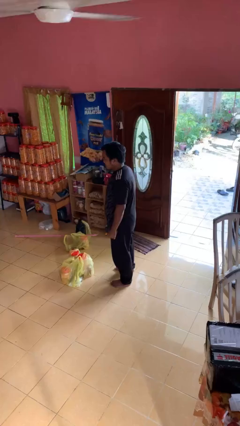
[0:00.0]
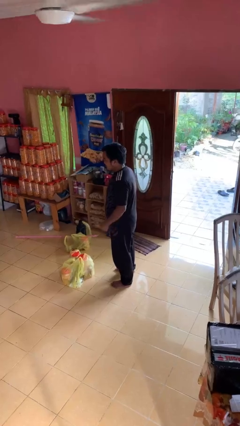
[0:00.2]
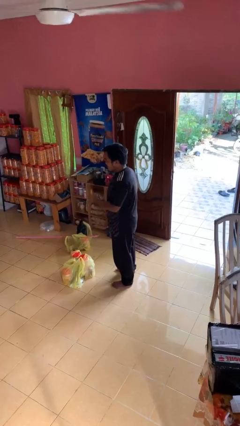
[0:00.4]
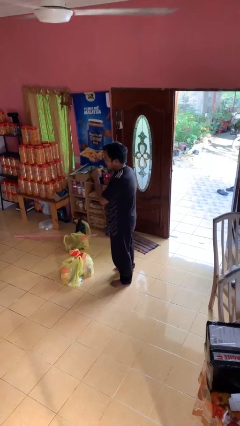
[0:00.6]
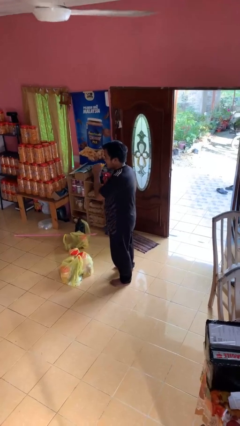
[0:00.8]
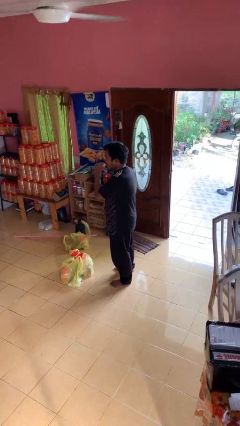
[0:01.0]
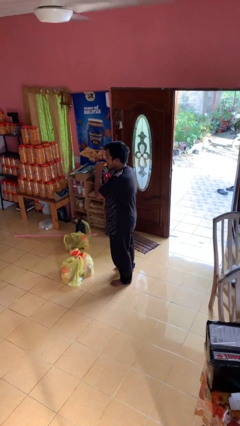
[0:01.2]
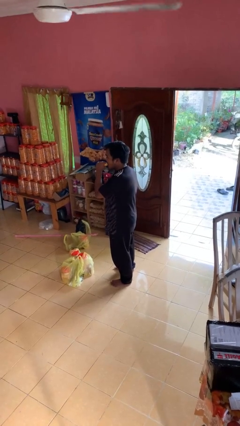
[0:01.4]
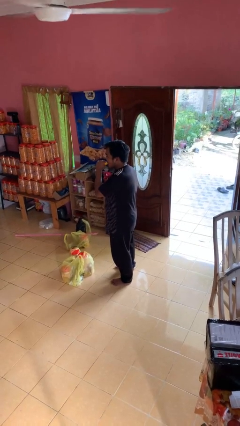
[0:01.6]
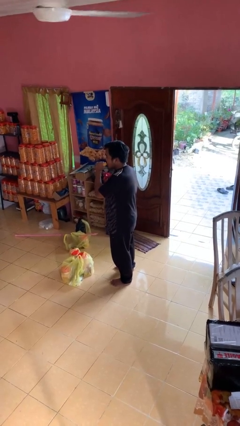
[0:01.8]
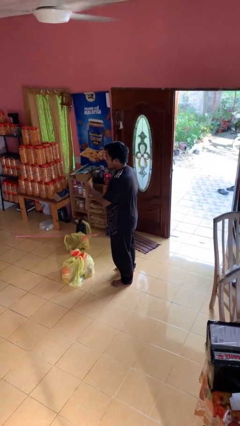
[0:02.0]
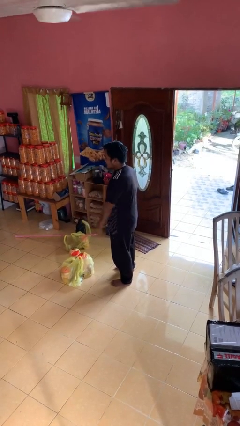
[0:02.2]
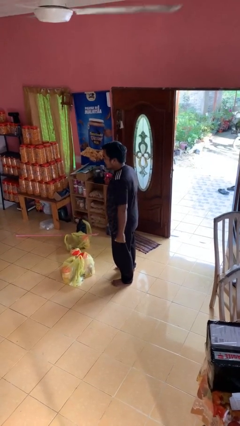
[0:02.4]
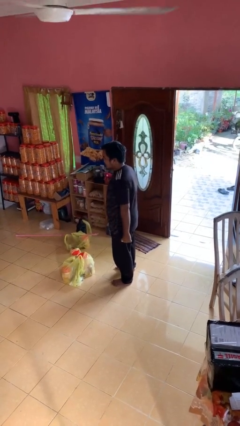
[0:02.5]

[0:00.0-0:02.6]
person eats banana

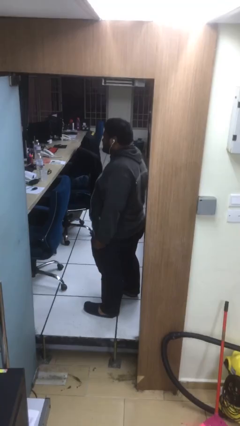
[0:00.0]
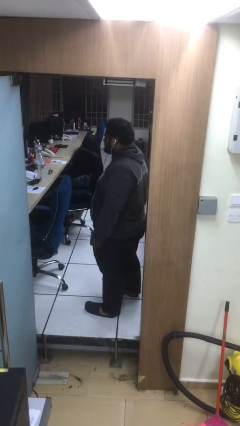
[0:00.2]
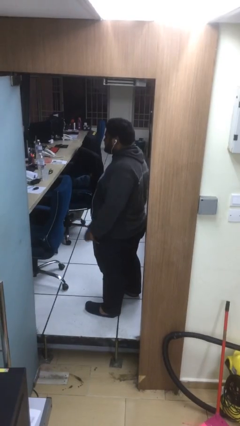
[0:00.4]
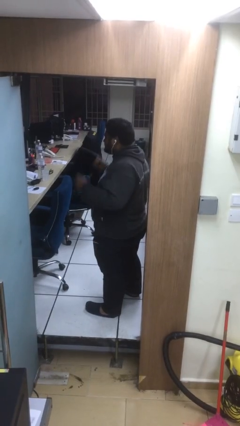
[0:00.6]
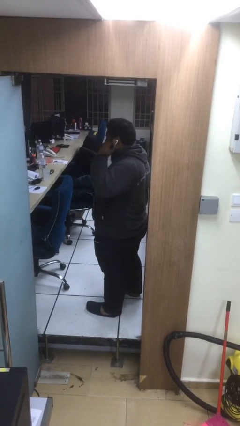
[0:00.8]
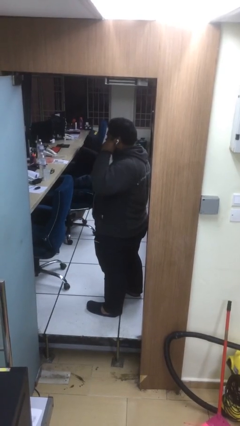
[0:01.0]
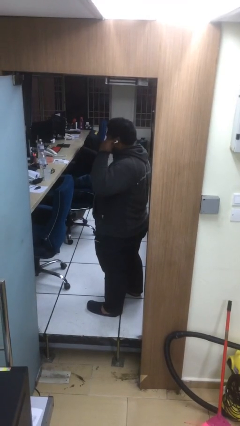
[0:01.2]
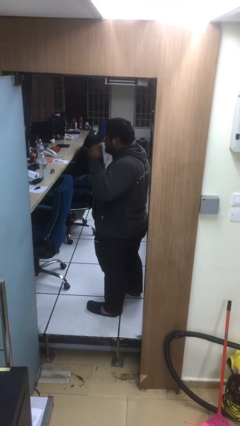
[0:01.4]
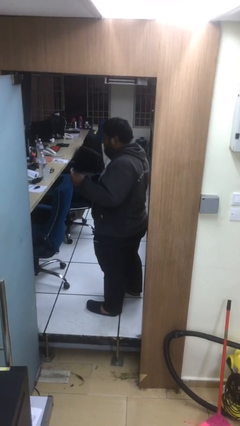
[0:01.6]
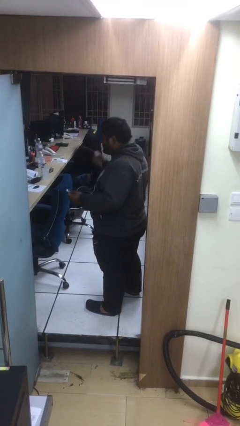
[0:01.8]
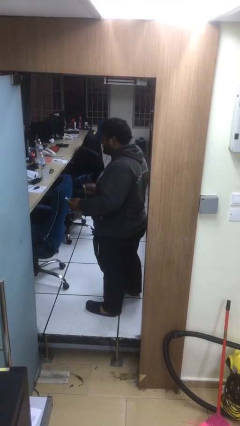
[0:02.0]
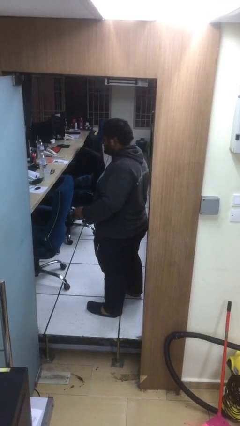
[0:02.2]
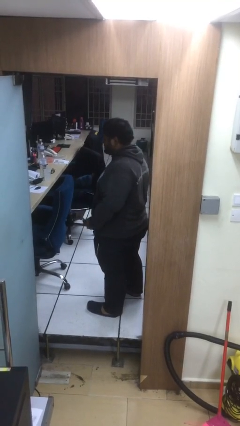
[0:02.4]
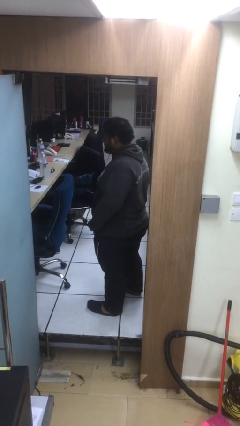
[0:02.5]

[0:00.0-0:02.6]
person takes off headphones

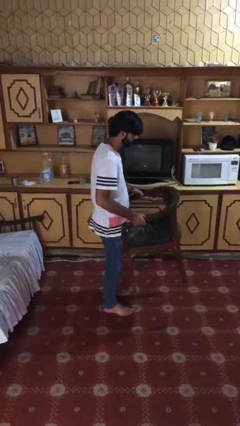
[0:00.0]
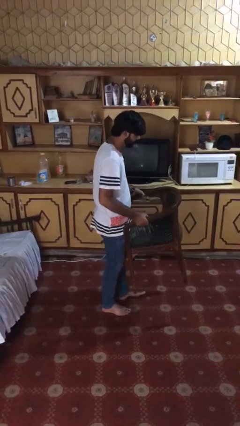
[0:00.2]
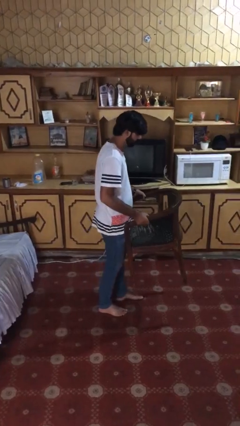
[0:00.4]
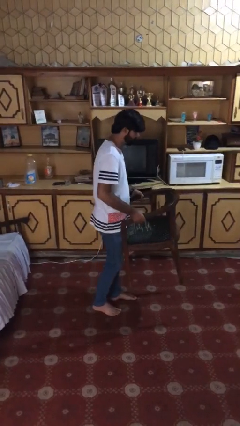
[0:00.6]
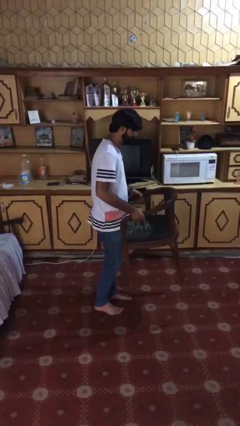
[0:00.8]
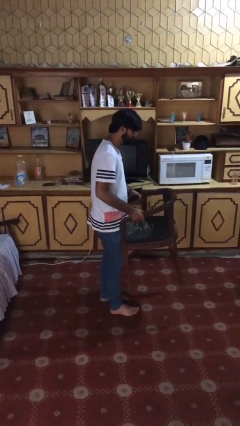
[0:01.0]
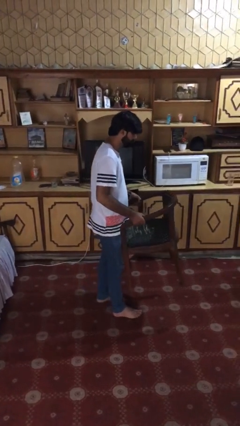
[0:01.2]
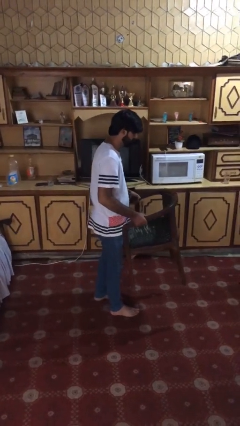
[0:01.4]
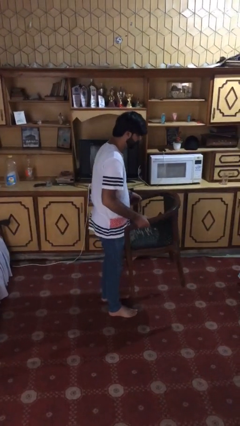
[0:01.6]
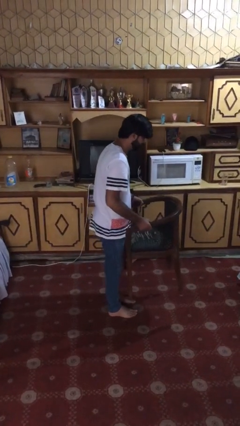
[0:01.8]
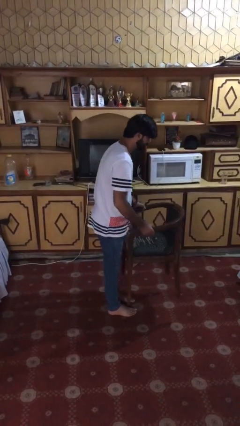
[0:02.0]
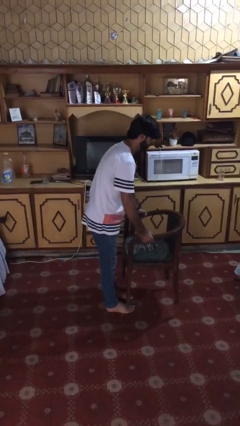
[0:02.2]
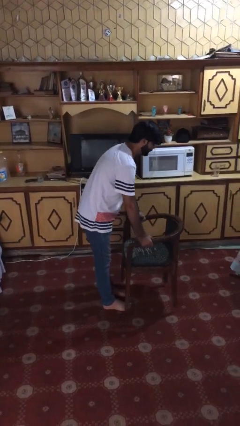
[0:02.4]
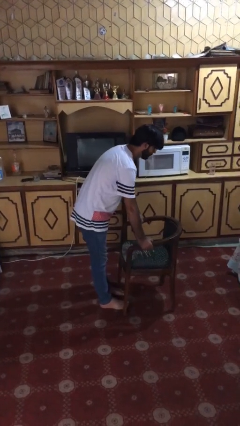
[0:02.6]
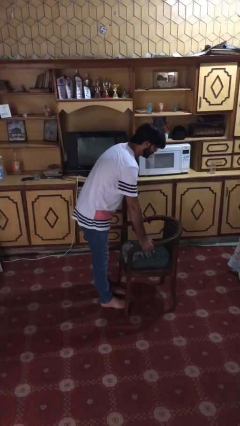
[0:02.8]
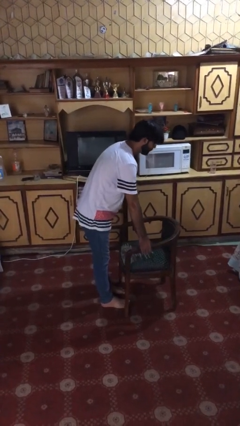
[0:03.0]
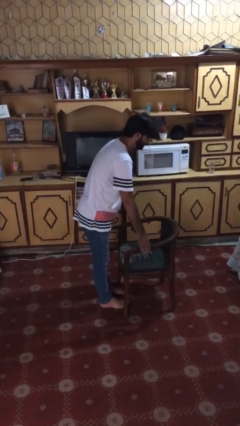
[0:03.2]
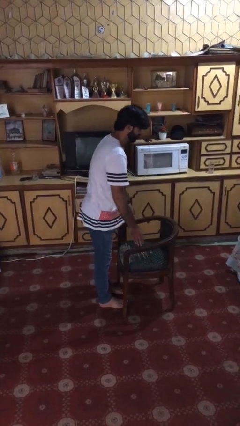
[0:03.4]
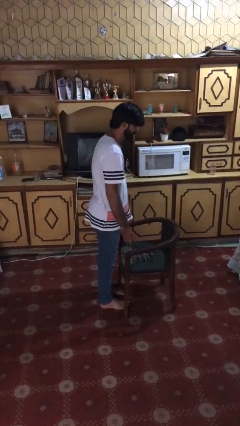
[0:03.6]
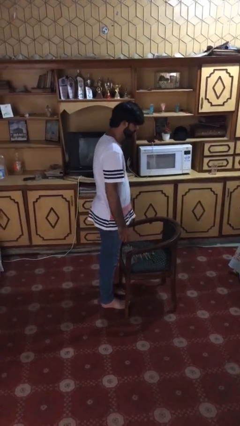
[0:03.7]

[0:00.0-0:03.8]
person puts down object on floor

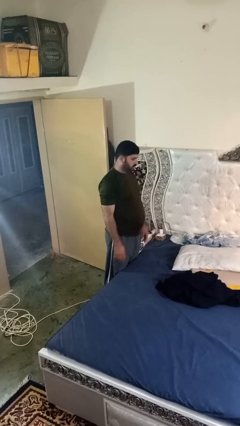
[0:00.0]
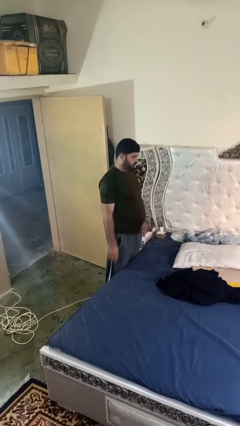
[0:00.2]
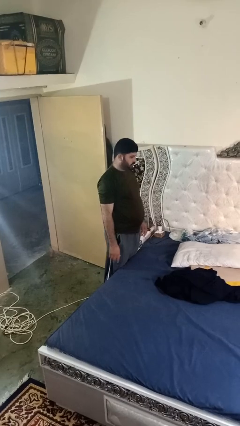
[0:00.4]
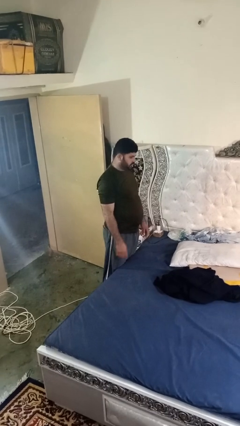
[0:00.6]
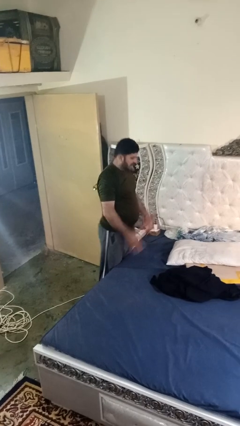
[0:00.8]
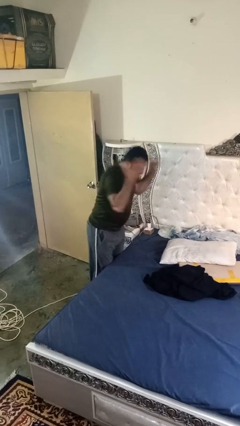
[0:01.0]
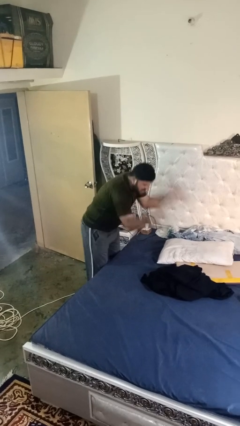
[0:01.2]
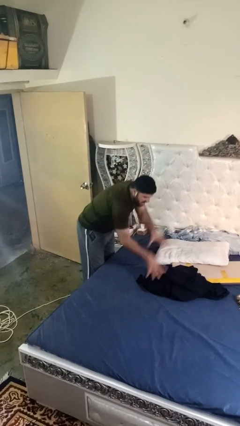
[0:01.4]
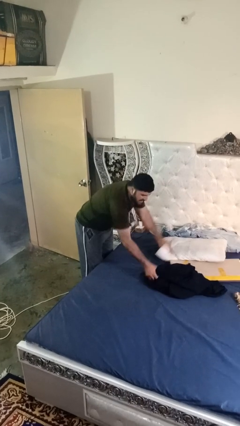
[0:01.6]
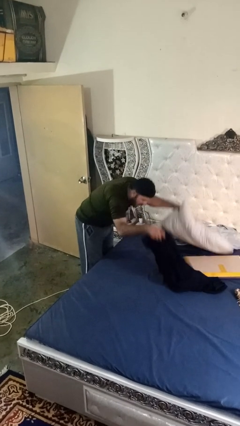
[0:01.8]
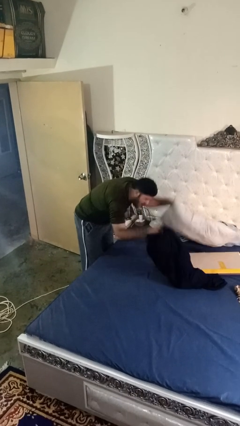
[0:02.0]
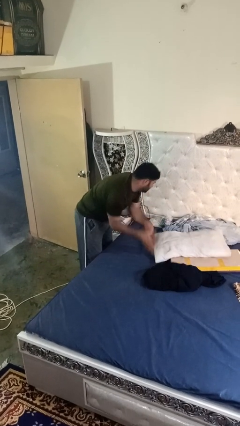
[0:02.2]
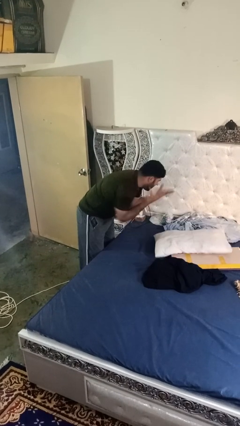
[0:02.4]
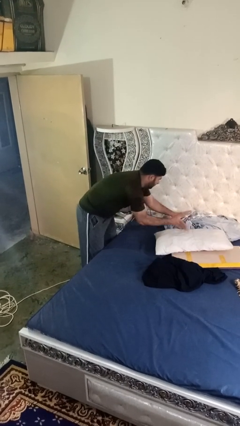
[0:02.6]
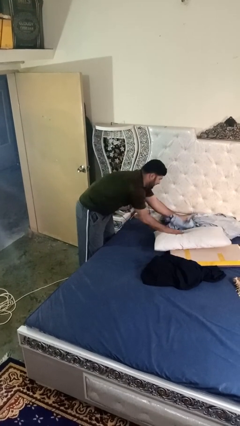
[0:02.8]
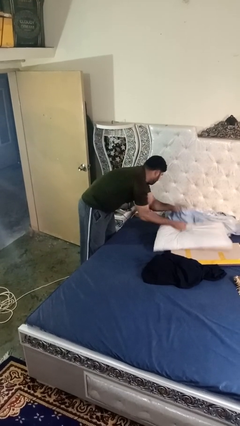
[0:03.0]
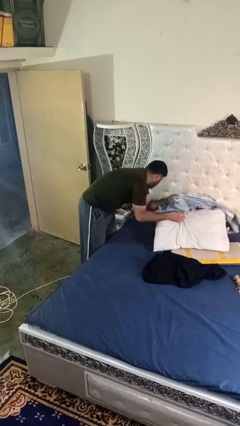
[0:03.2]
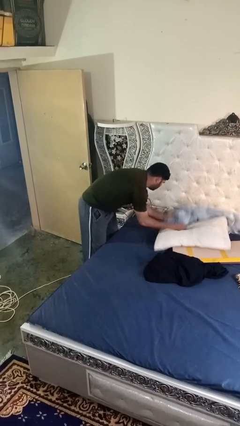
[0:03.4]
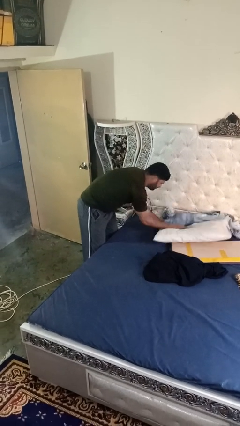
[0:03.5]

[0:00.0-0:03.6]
person searches under bed

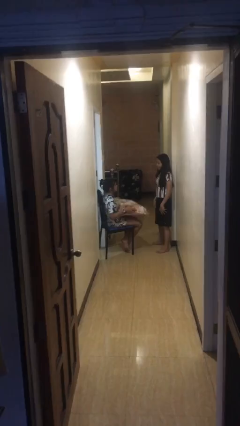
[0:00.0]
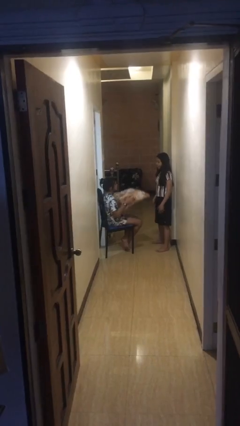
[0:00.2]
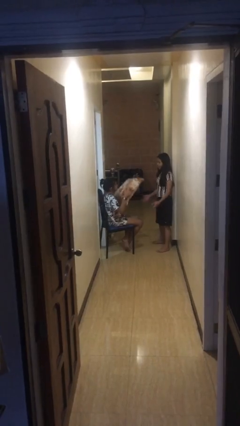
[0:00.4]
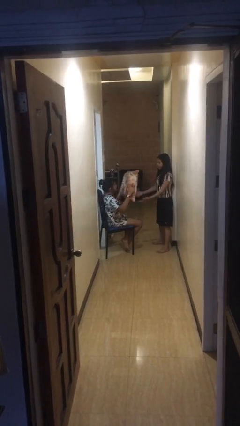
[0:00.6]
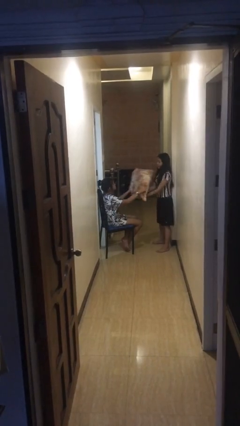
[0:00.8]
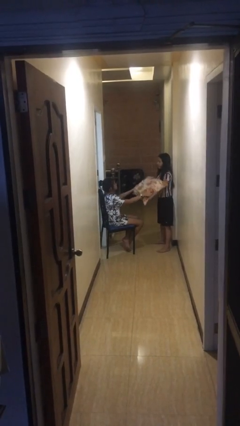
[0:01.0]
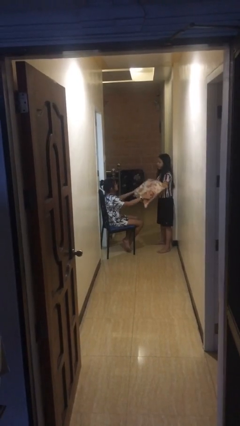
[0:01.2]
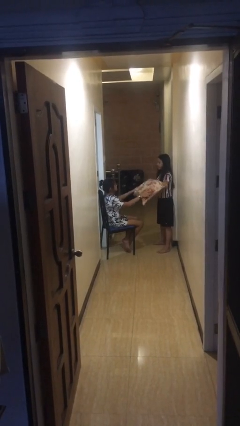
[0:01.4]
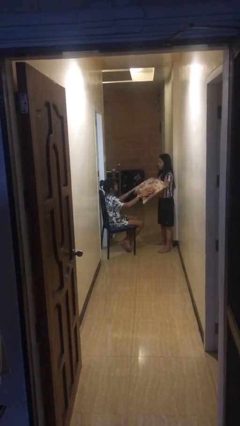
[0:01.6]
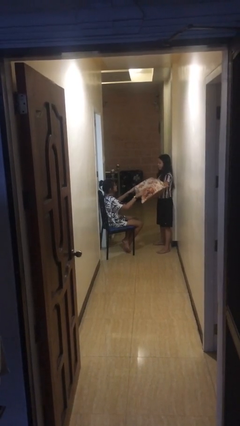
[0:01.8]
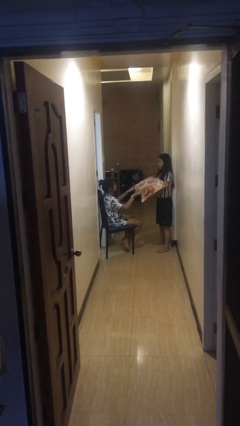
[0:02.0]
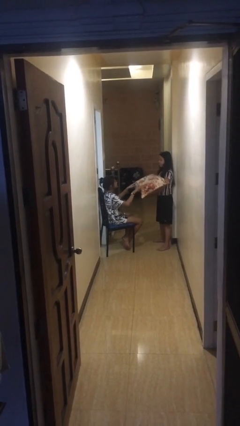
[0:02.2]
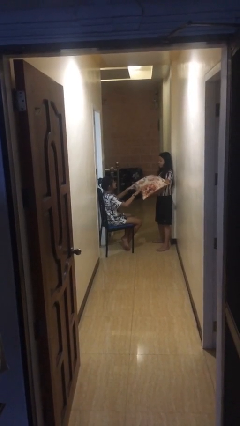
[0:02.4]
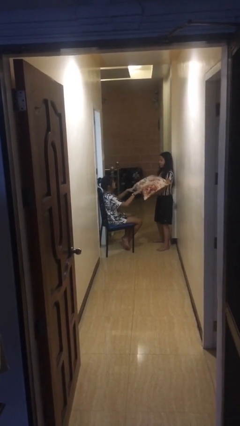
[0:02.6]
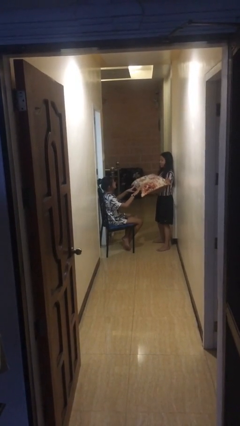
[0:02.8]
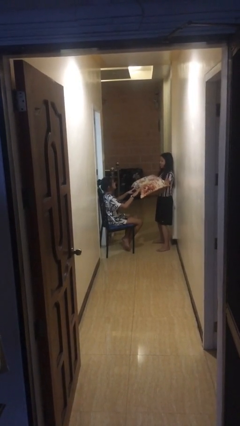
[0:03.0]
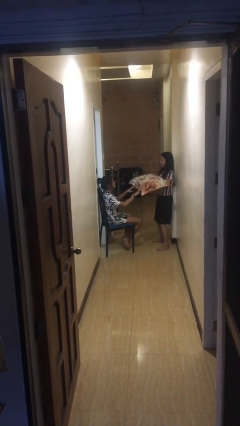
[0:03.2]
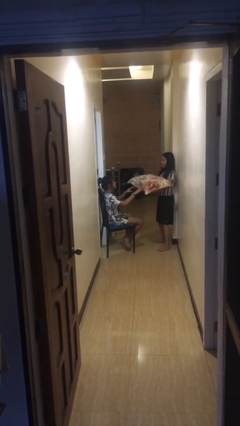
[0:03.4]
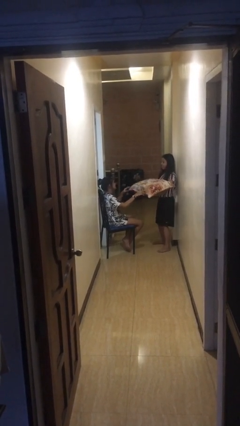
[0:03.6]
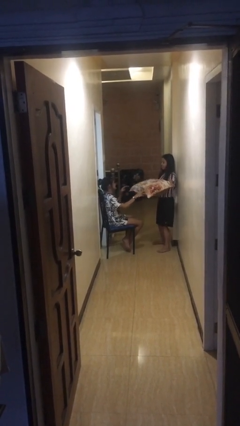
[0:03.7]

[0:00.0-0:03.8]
person transfers object to person

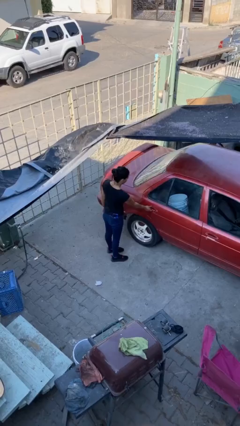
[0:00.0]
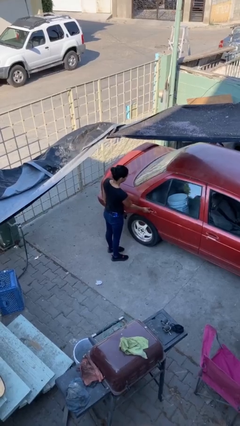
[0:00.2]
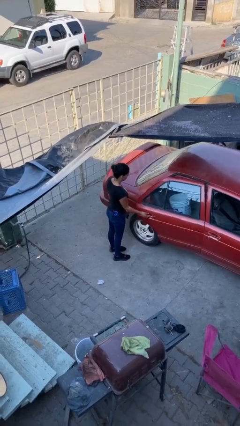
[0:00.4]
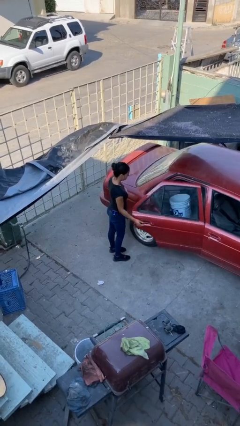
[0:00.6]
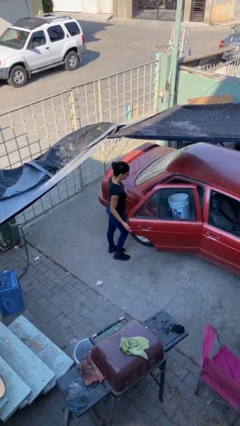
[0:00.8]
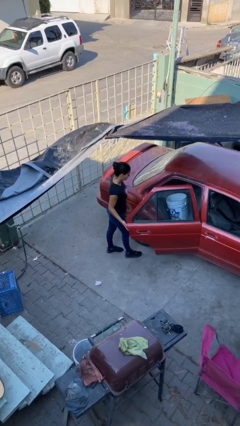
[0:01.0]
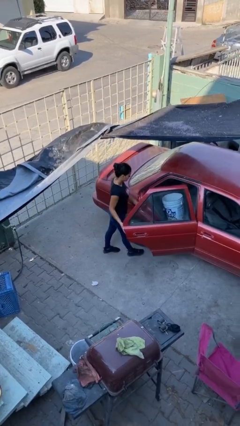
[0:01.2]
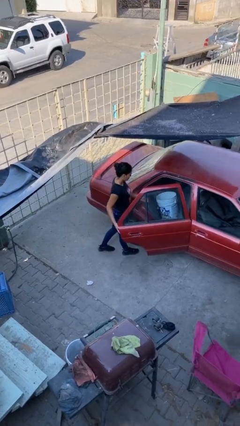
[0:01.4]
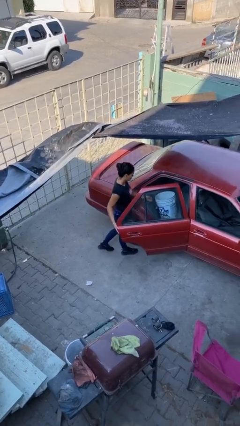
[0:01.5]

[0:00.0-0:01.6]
person opens car door
